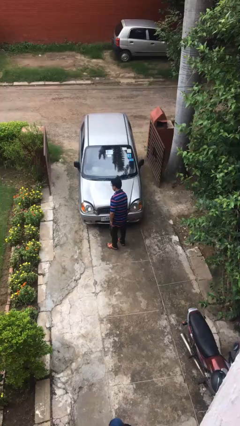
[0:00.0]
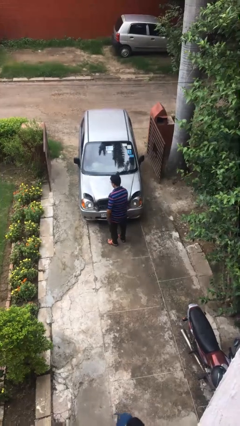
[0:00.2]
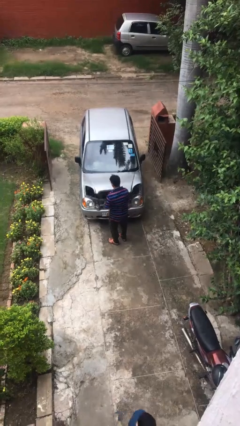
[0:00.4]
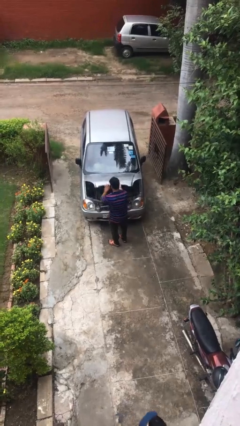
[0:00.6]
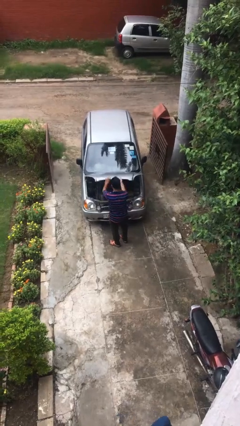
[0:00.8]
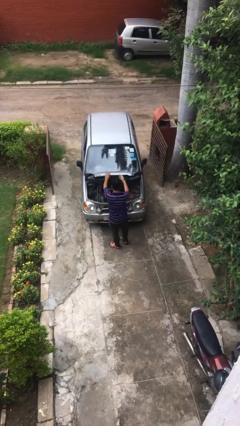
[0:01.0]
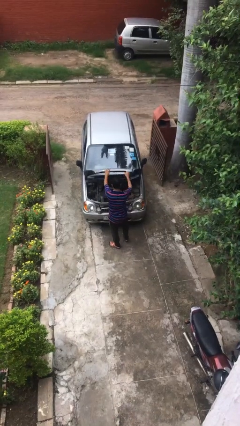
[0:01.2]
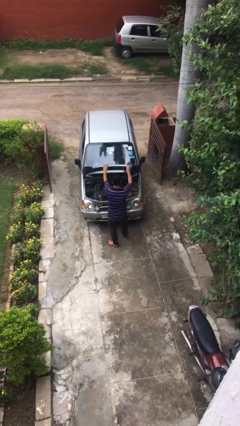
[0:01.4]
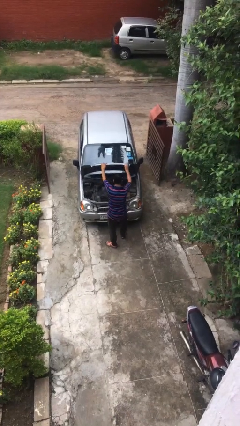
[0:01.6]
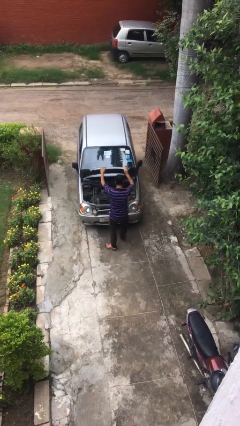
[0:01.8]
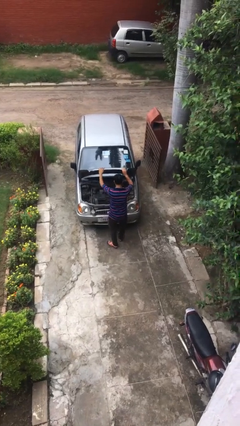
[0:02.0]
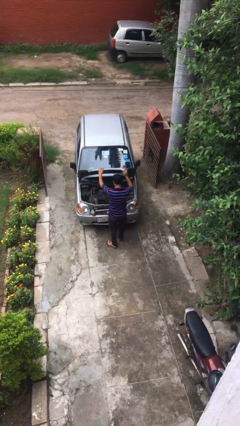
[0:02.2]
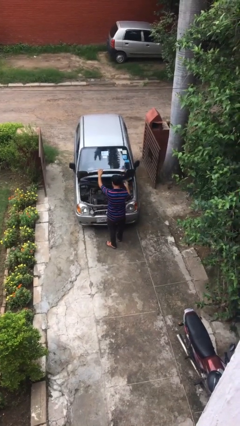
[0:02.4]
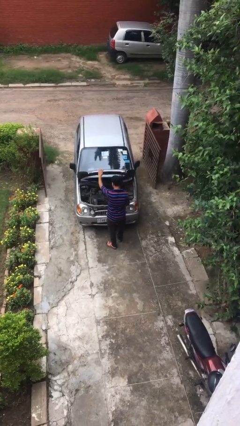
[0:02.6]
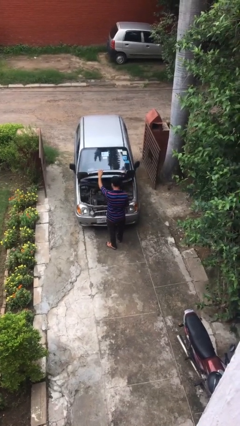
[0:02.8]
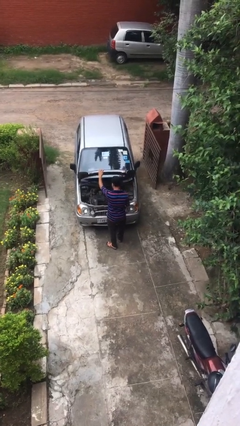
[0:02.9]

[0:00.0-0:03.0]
person opens car hood

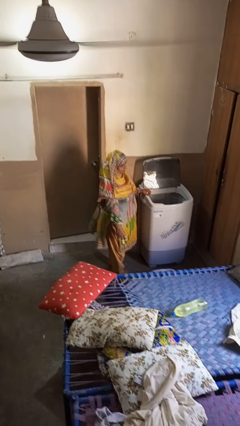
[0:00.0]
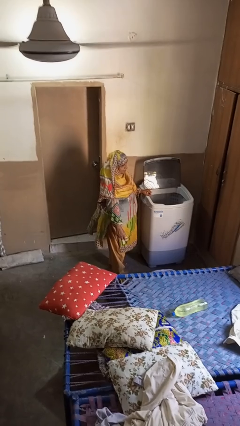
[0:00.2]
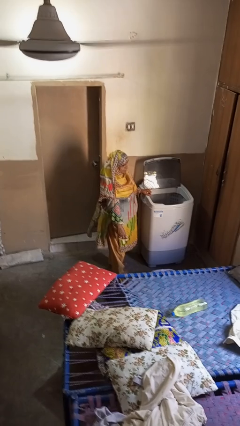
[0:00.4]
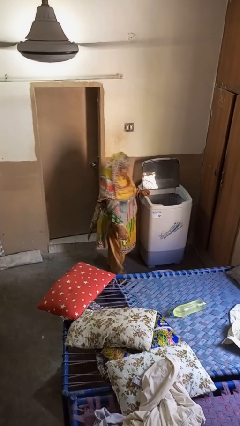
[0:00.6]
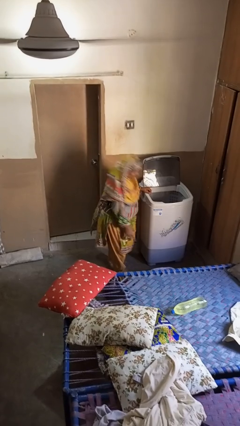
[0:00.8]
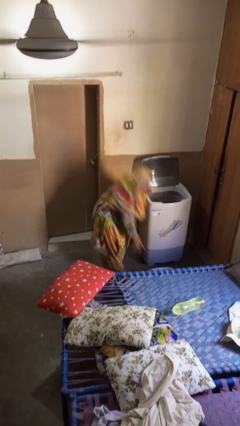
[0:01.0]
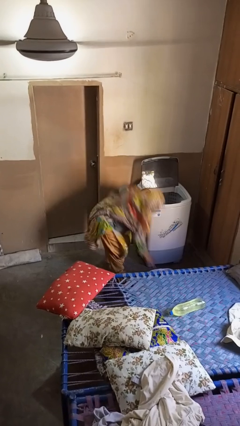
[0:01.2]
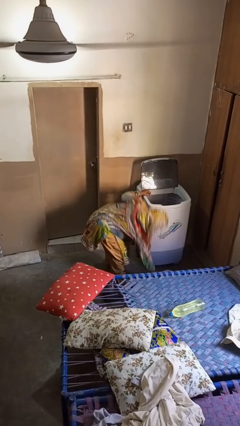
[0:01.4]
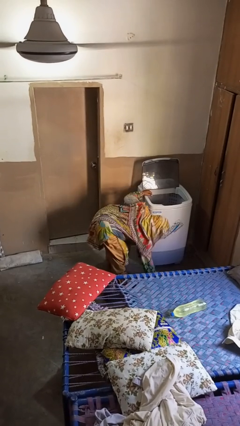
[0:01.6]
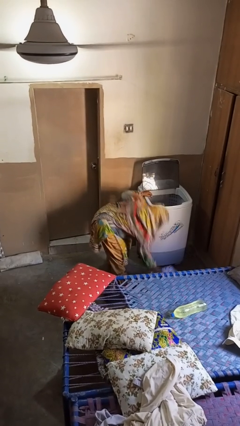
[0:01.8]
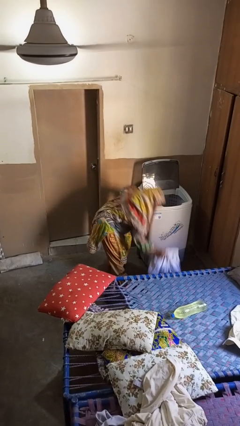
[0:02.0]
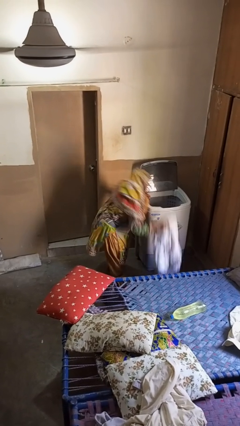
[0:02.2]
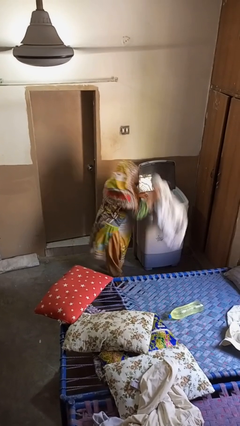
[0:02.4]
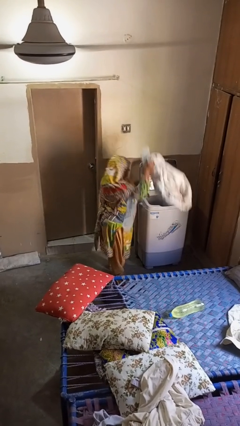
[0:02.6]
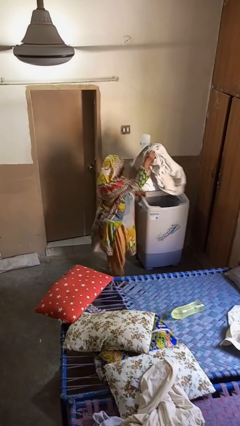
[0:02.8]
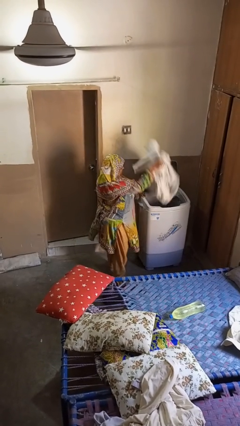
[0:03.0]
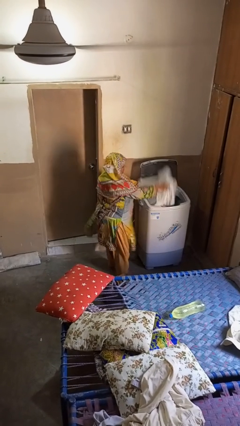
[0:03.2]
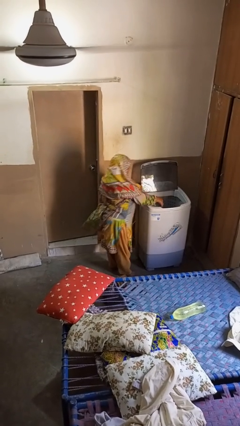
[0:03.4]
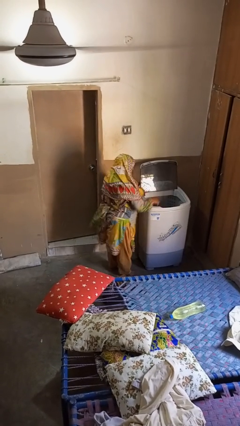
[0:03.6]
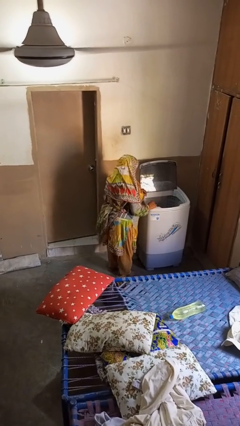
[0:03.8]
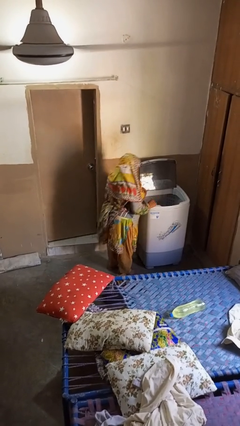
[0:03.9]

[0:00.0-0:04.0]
person loads clotheswasher

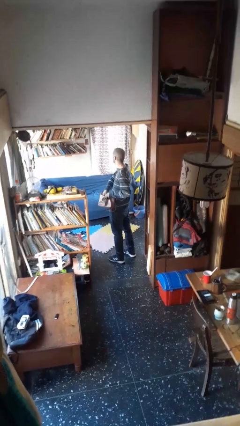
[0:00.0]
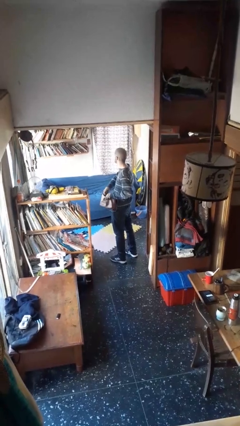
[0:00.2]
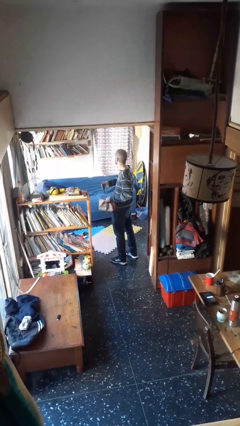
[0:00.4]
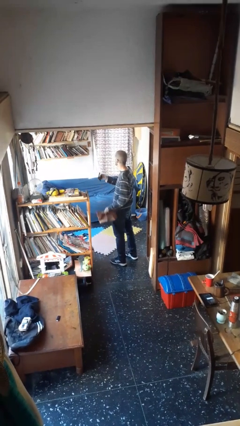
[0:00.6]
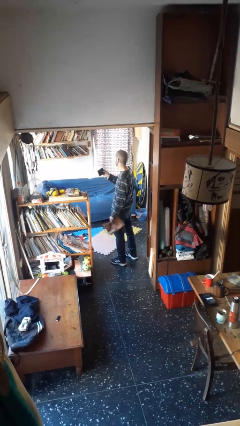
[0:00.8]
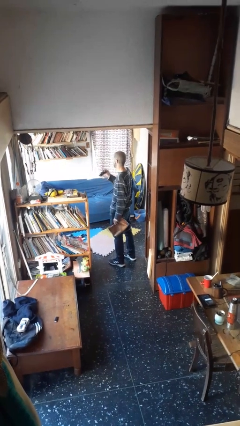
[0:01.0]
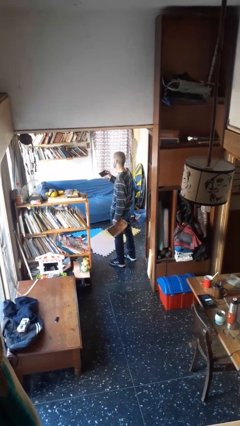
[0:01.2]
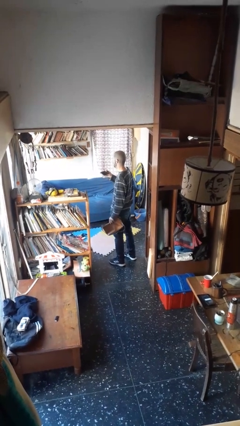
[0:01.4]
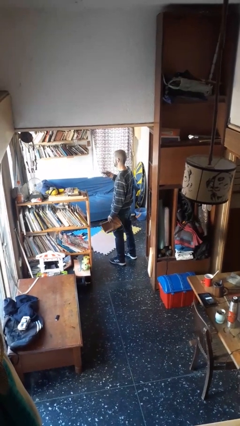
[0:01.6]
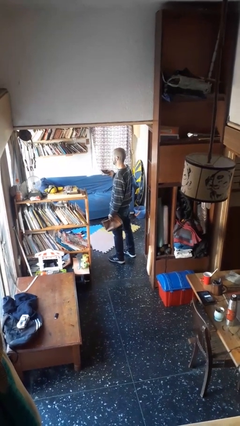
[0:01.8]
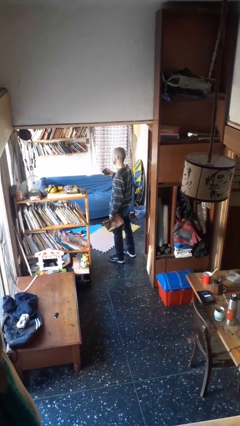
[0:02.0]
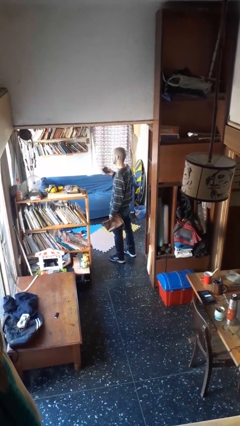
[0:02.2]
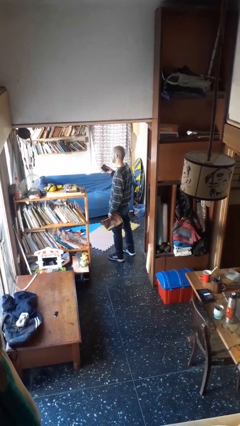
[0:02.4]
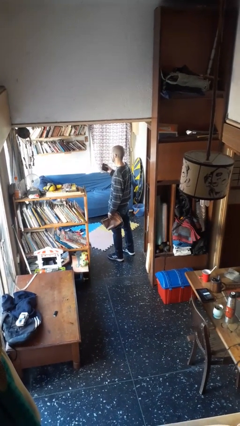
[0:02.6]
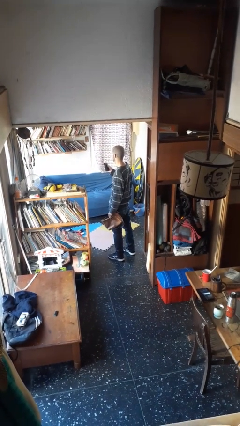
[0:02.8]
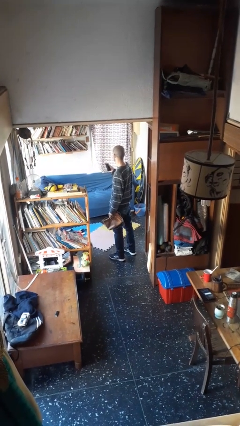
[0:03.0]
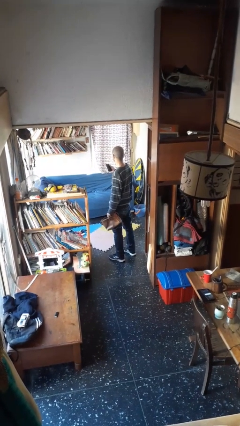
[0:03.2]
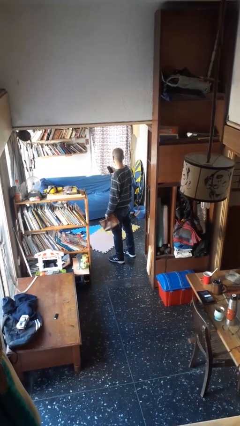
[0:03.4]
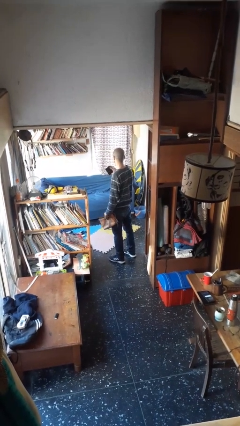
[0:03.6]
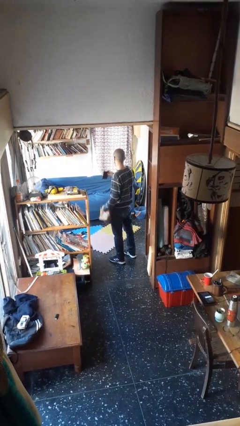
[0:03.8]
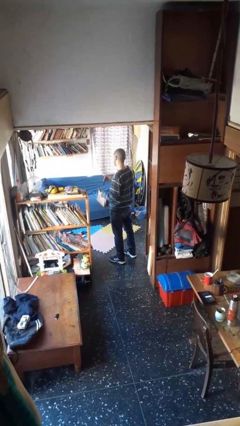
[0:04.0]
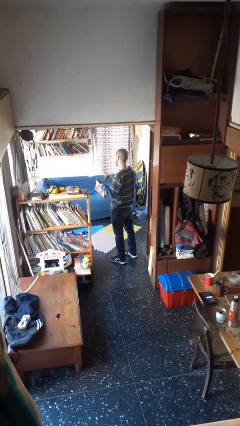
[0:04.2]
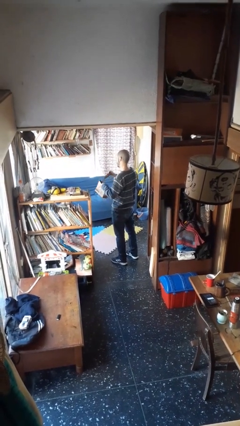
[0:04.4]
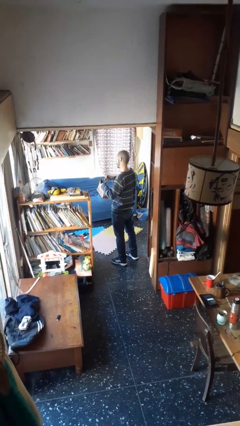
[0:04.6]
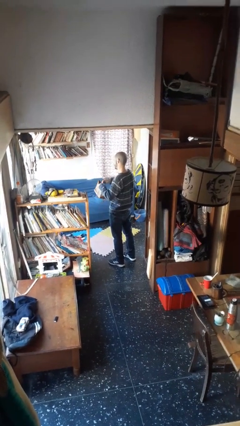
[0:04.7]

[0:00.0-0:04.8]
person takes object from purse

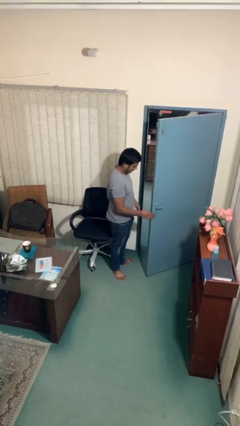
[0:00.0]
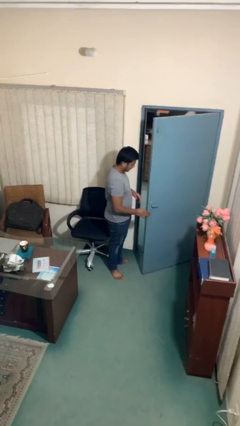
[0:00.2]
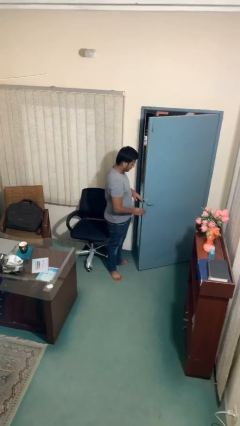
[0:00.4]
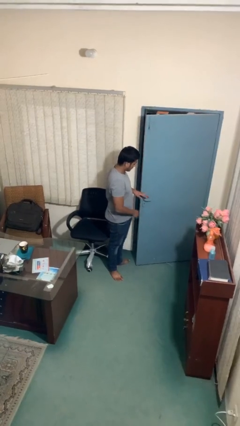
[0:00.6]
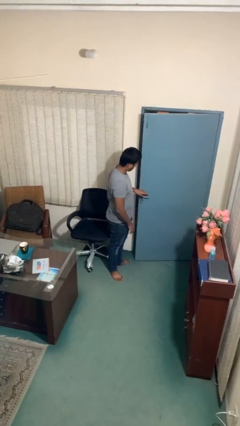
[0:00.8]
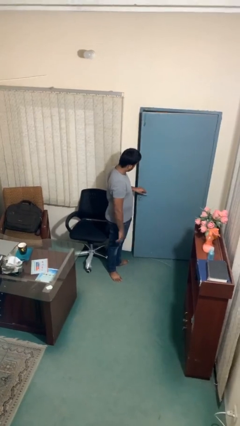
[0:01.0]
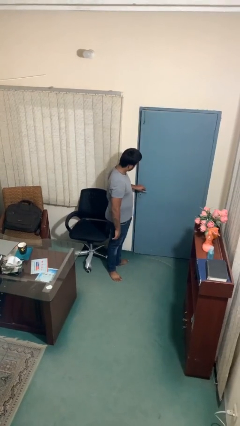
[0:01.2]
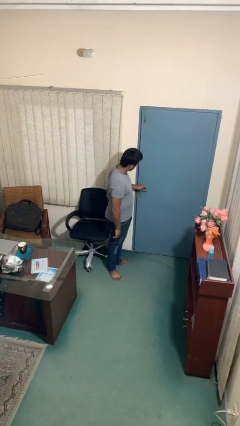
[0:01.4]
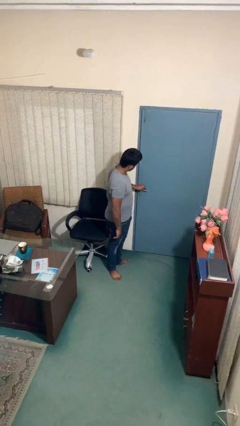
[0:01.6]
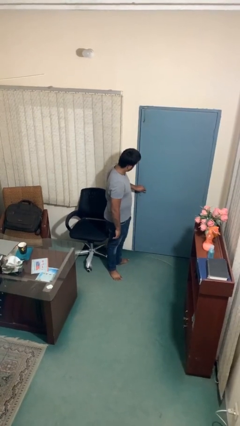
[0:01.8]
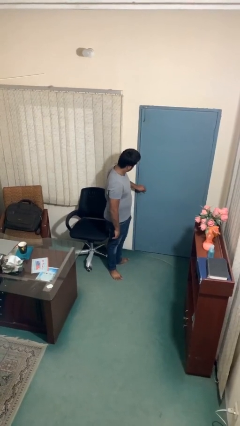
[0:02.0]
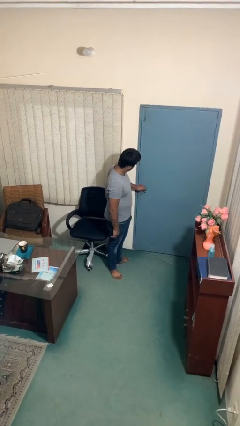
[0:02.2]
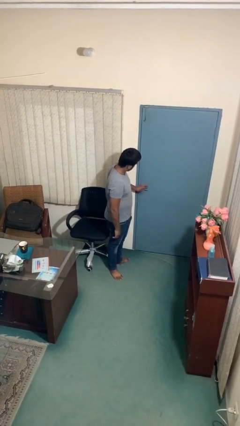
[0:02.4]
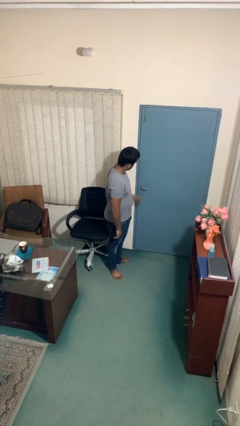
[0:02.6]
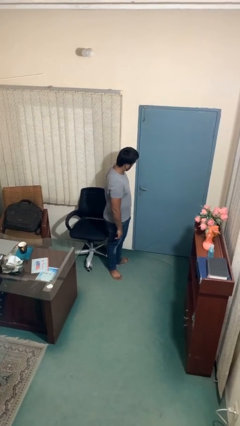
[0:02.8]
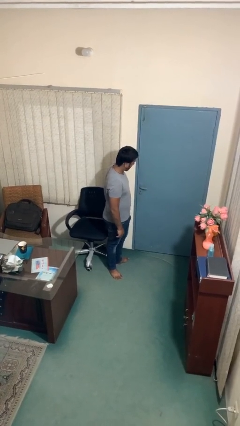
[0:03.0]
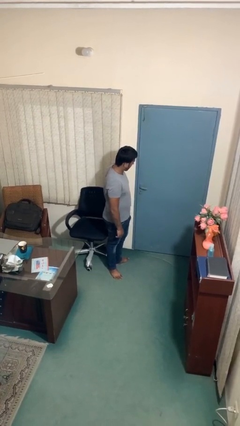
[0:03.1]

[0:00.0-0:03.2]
person closes facility door

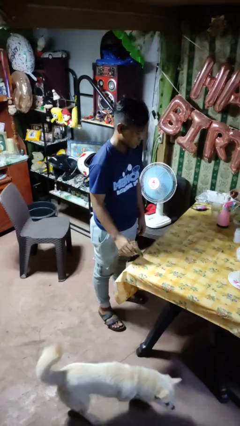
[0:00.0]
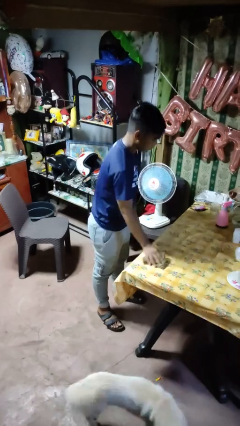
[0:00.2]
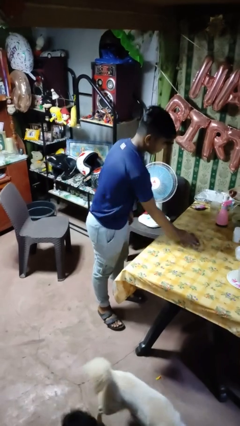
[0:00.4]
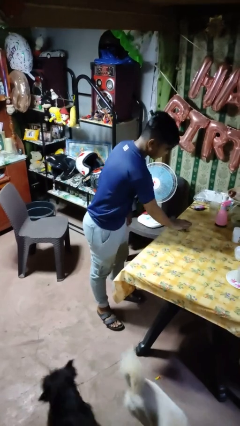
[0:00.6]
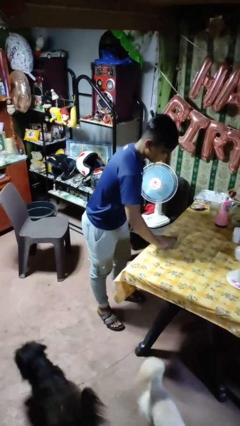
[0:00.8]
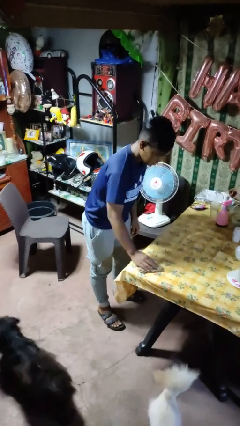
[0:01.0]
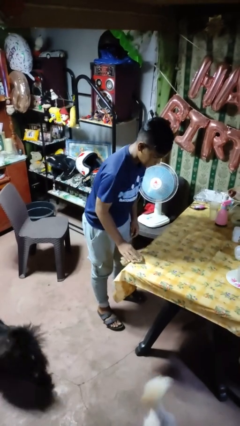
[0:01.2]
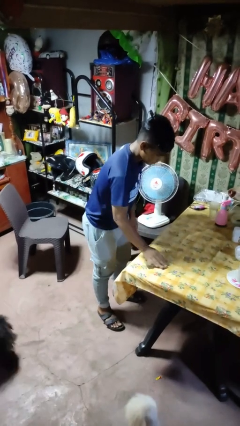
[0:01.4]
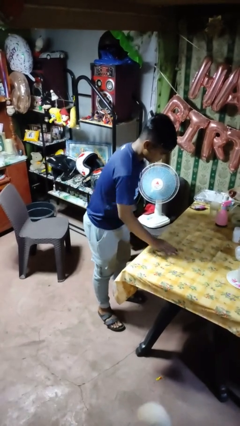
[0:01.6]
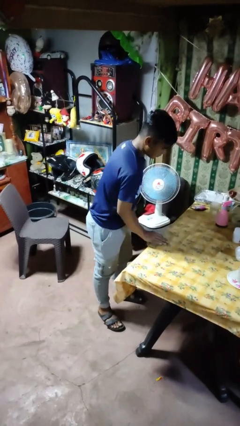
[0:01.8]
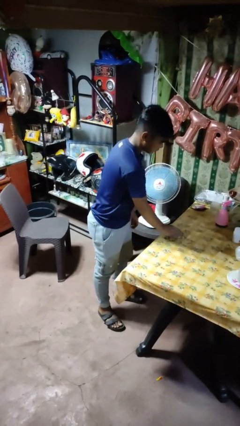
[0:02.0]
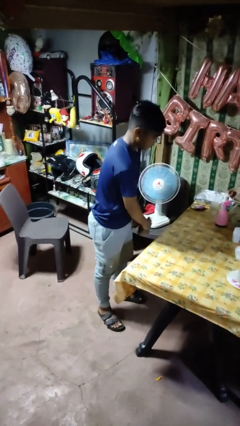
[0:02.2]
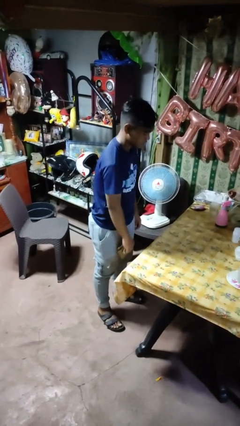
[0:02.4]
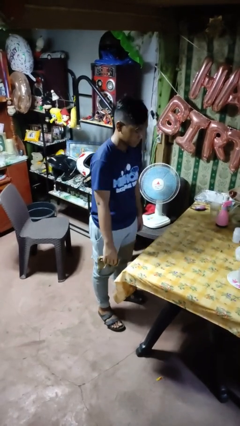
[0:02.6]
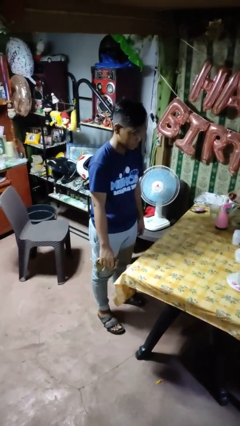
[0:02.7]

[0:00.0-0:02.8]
person cleans table with rag
